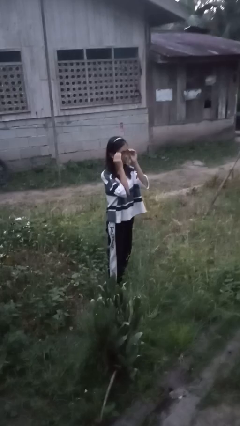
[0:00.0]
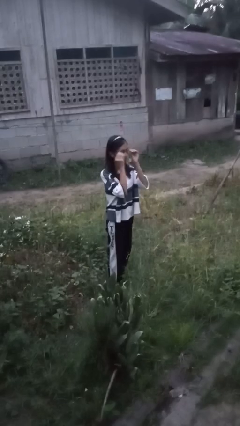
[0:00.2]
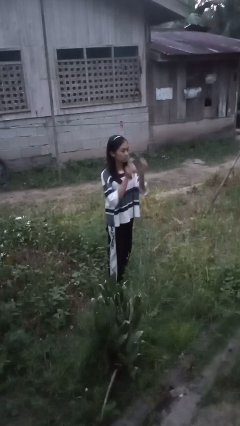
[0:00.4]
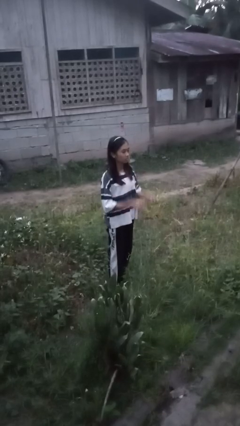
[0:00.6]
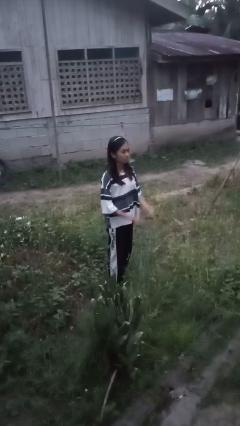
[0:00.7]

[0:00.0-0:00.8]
person takes off glasses

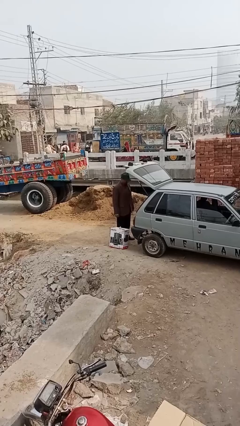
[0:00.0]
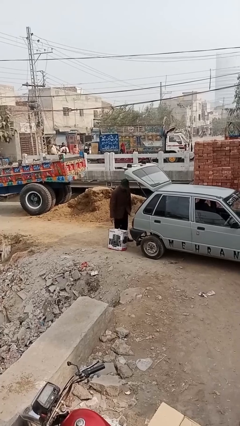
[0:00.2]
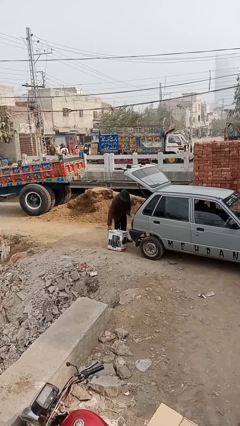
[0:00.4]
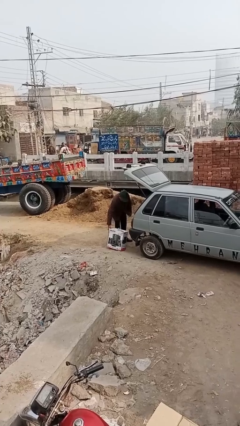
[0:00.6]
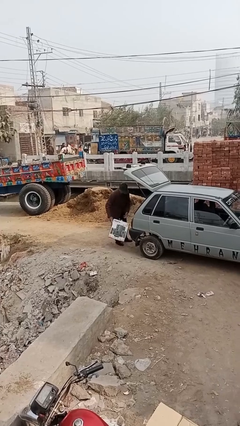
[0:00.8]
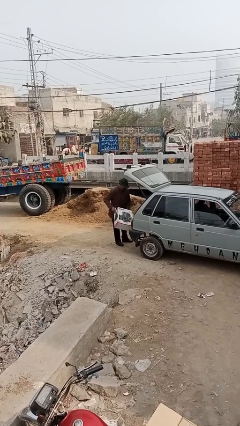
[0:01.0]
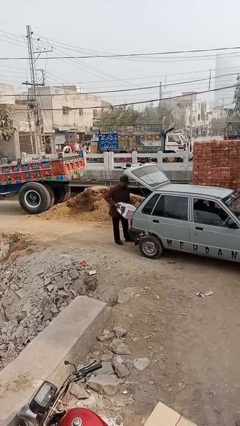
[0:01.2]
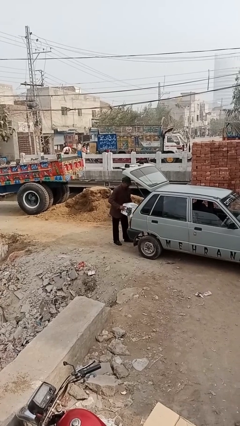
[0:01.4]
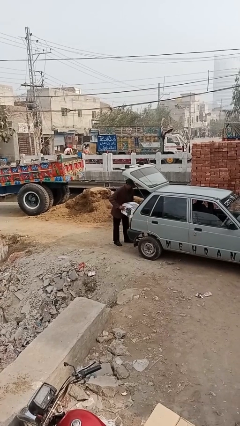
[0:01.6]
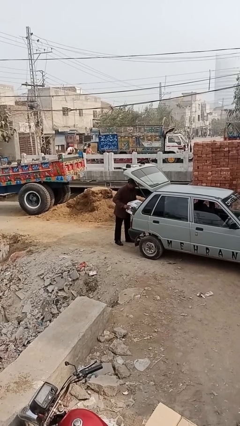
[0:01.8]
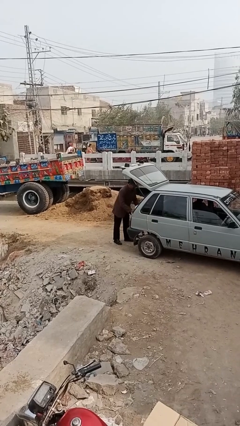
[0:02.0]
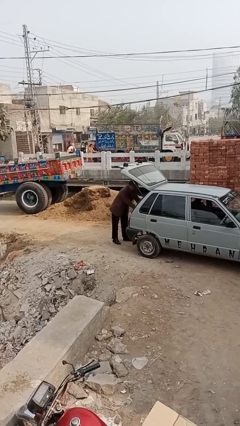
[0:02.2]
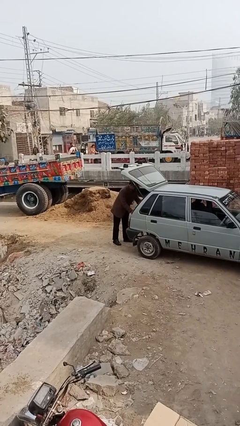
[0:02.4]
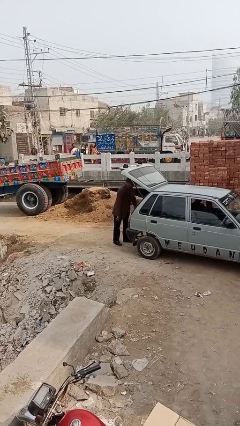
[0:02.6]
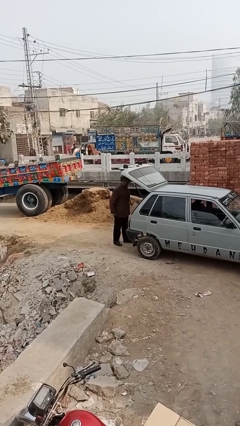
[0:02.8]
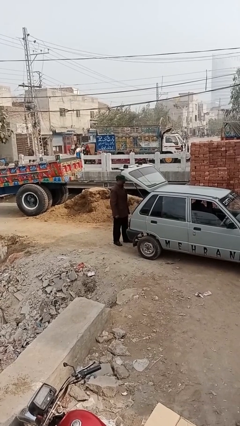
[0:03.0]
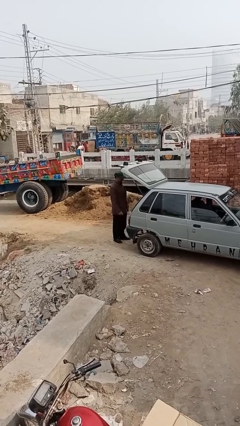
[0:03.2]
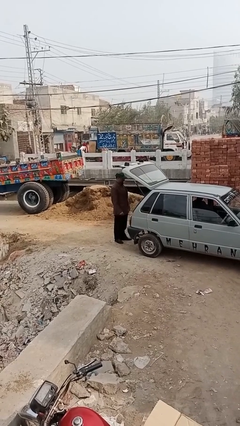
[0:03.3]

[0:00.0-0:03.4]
person loads car

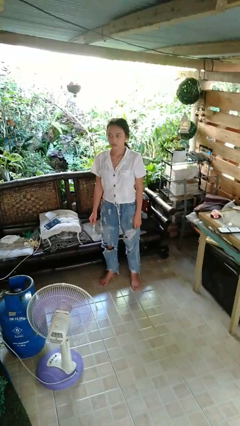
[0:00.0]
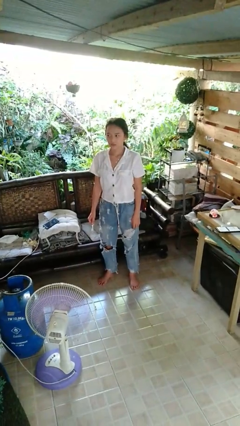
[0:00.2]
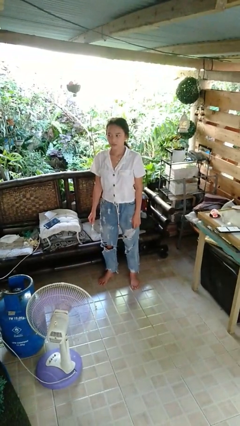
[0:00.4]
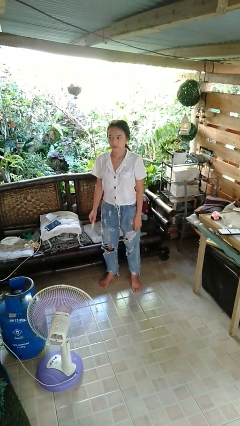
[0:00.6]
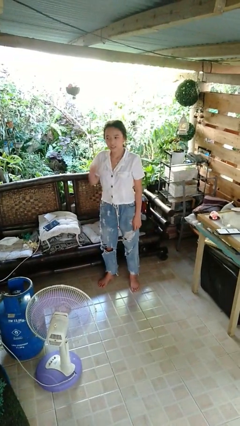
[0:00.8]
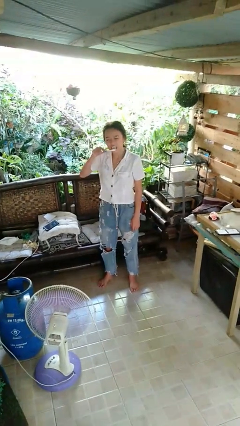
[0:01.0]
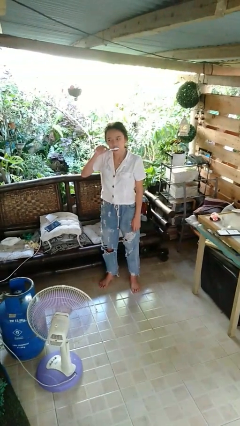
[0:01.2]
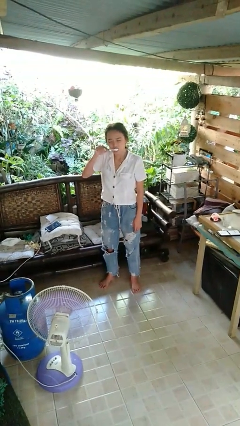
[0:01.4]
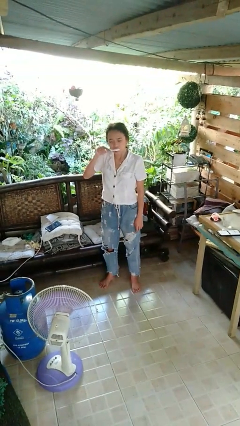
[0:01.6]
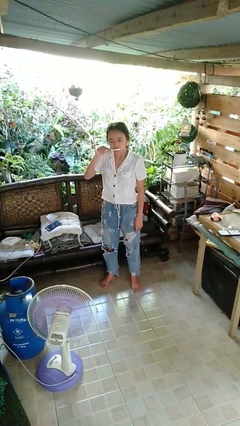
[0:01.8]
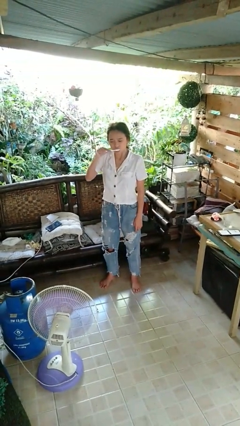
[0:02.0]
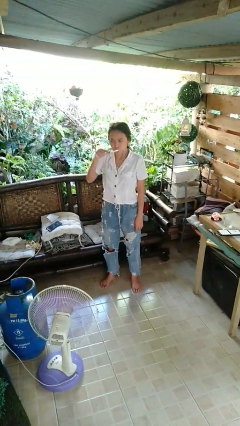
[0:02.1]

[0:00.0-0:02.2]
person brushes teeth

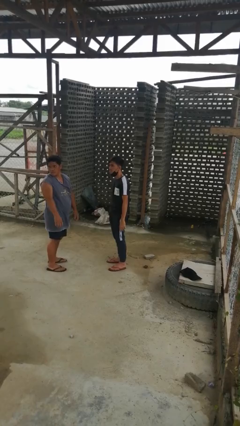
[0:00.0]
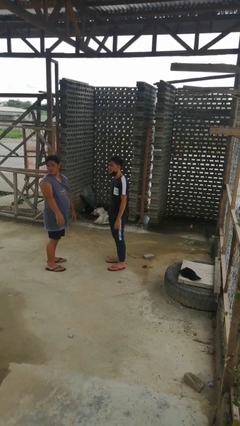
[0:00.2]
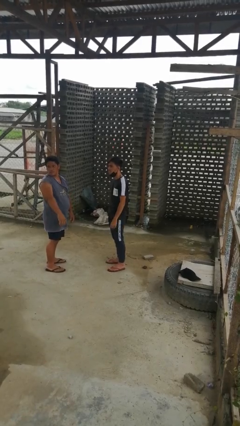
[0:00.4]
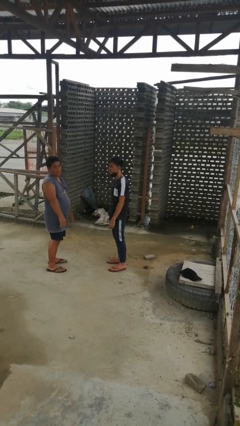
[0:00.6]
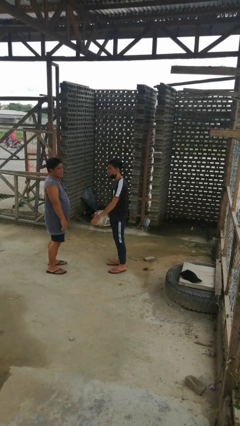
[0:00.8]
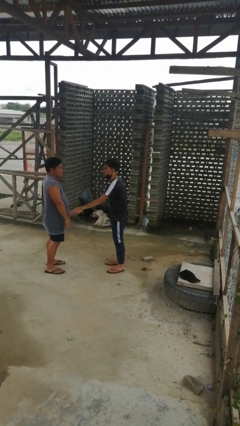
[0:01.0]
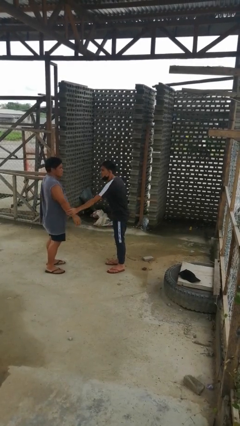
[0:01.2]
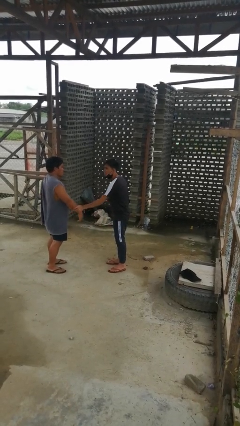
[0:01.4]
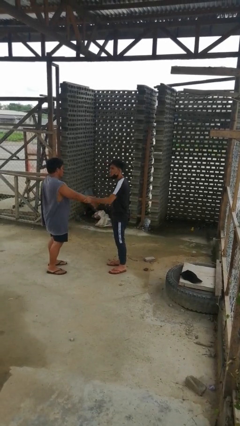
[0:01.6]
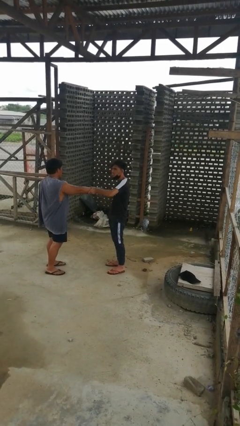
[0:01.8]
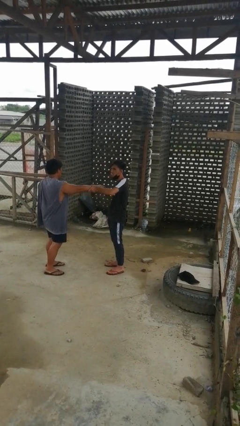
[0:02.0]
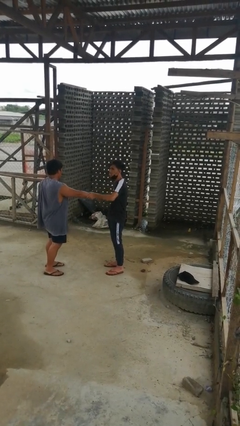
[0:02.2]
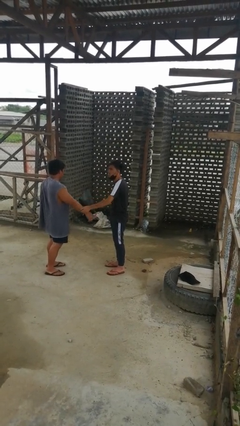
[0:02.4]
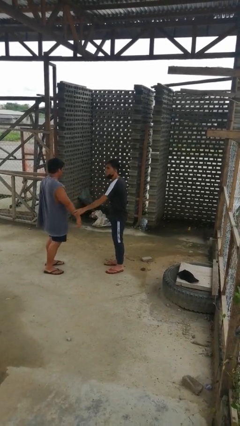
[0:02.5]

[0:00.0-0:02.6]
person grabs person by forearm

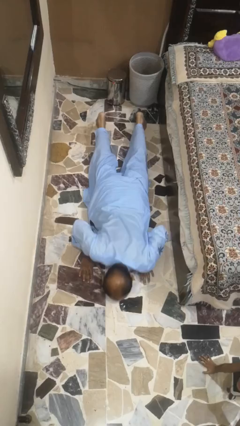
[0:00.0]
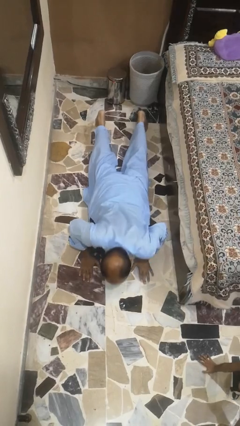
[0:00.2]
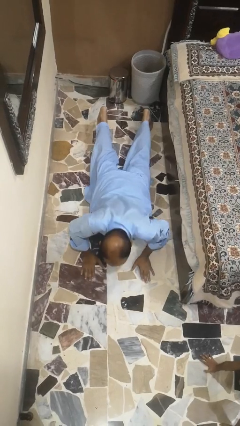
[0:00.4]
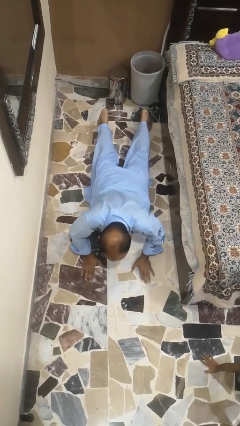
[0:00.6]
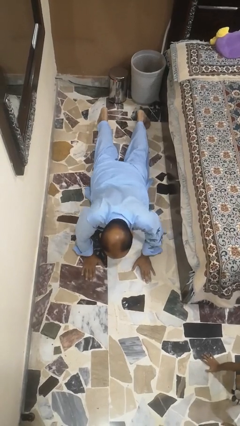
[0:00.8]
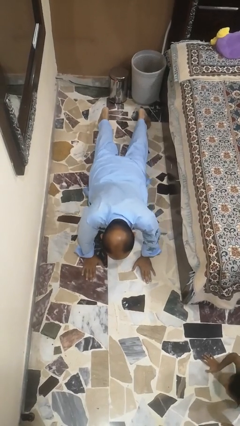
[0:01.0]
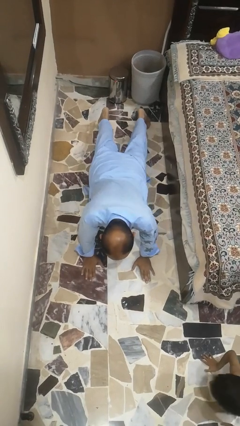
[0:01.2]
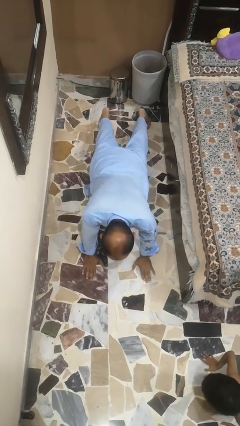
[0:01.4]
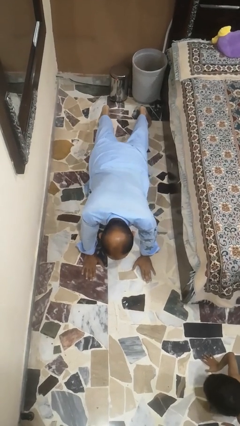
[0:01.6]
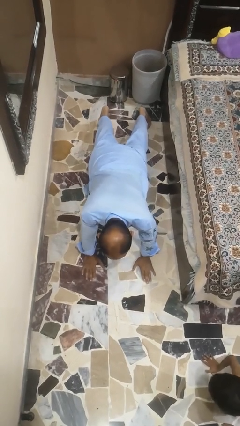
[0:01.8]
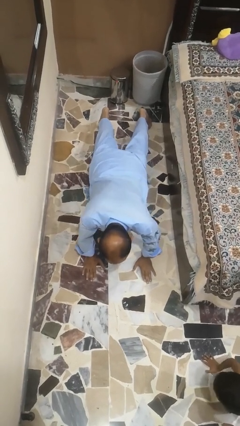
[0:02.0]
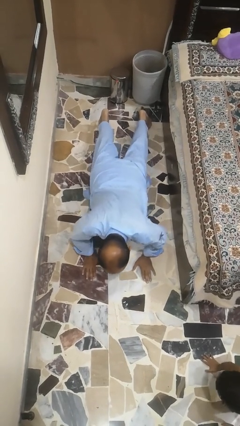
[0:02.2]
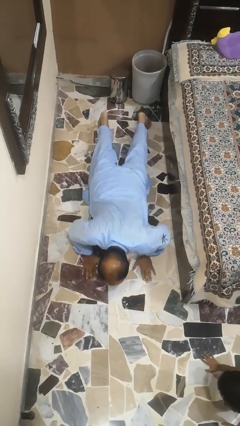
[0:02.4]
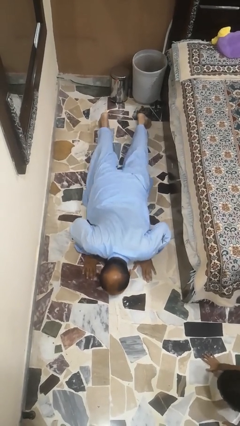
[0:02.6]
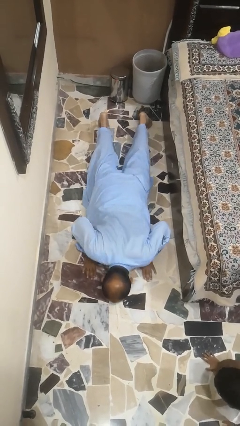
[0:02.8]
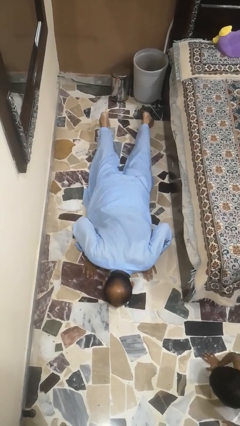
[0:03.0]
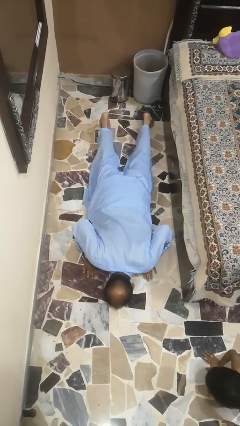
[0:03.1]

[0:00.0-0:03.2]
person exercises with pushup

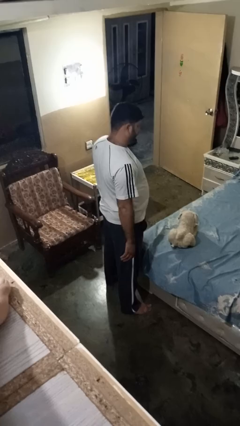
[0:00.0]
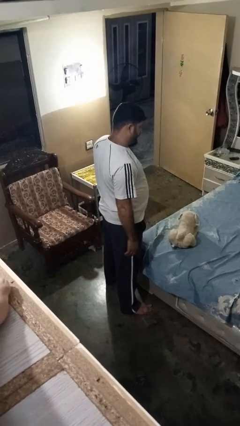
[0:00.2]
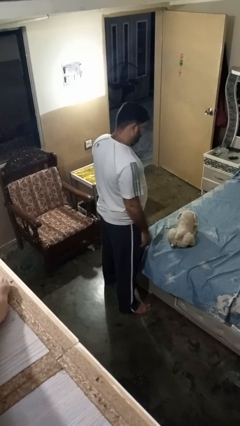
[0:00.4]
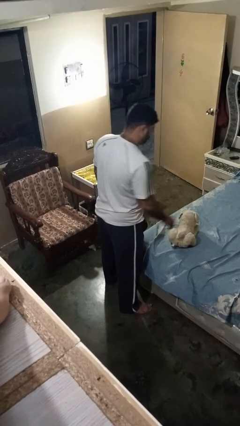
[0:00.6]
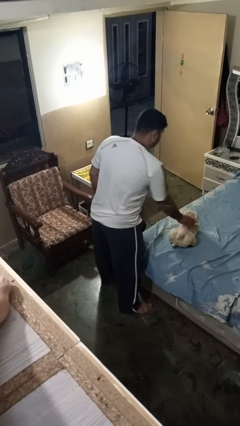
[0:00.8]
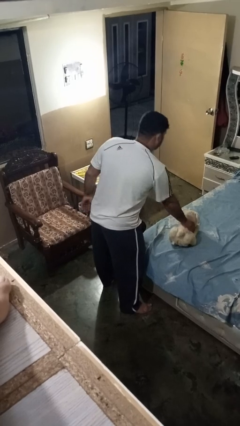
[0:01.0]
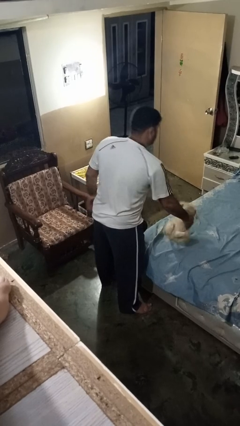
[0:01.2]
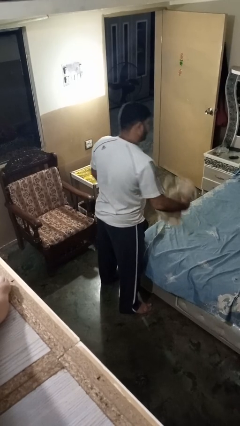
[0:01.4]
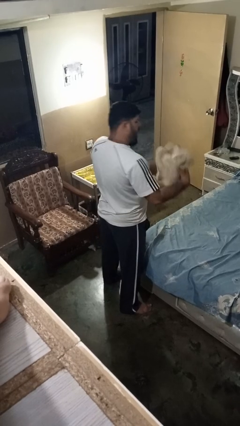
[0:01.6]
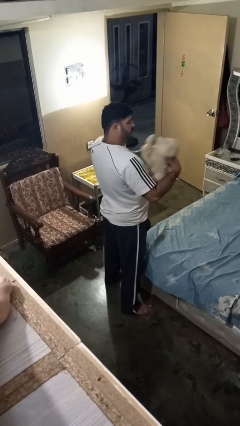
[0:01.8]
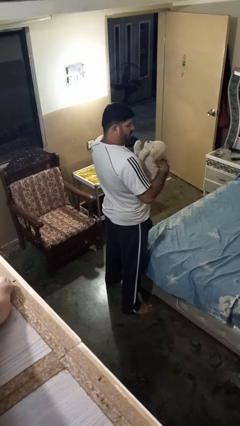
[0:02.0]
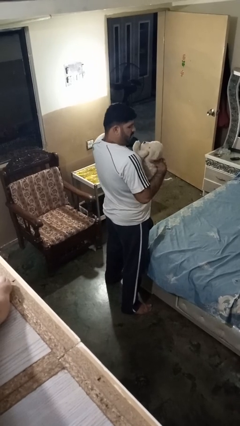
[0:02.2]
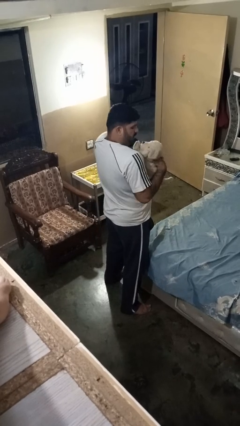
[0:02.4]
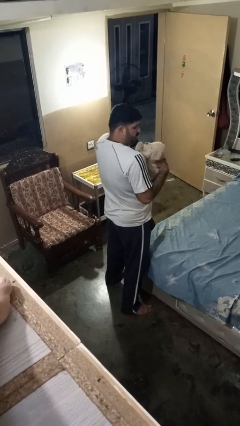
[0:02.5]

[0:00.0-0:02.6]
person hugs stuffed animal

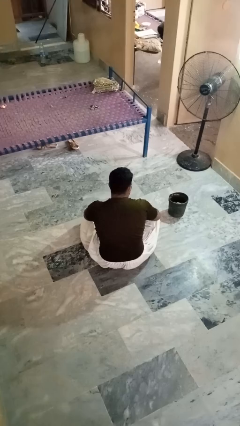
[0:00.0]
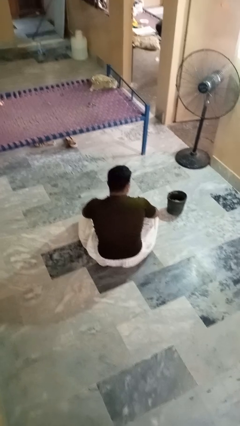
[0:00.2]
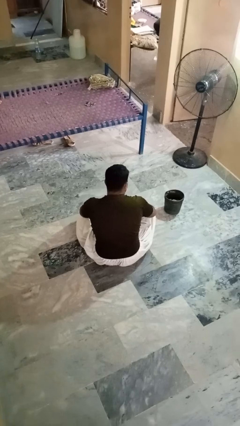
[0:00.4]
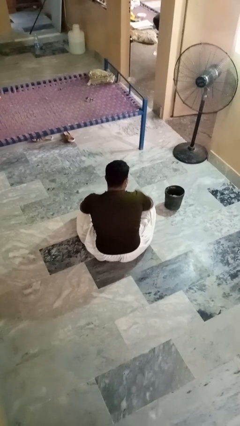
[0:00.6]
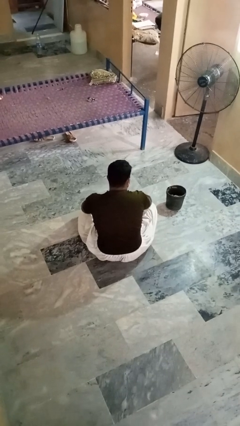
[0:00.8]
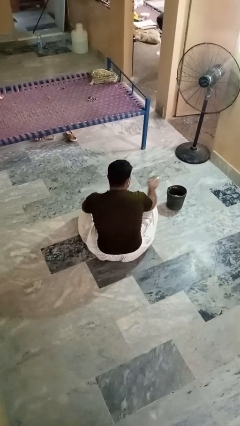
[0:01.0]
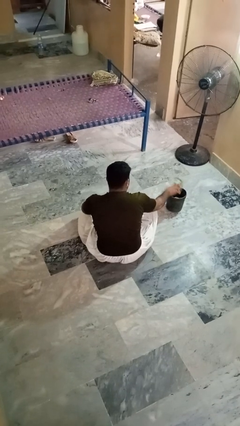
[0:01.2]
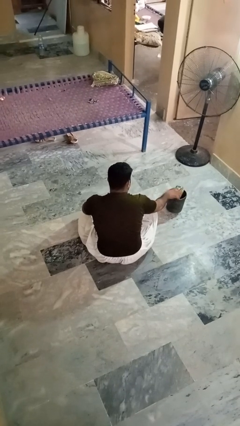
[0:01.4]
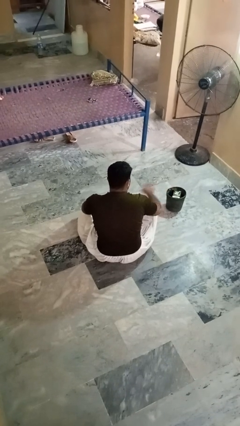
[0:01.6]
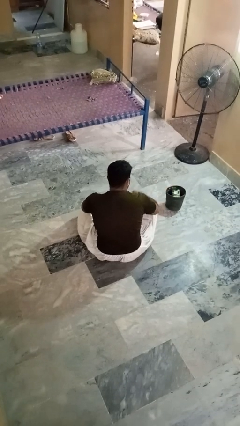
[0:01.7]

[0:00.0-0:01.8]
person puts object into basket

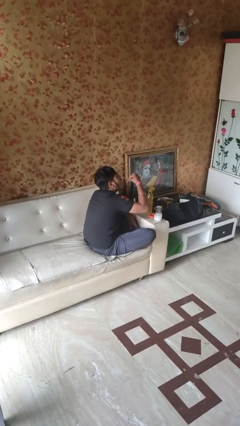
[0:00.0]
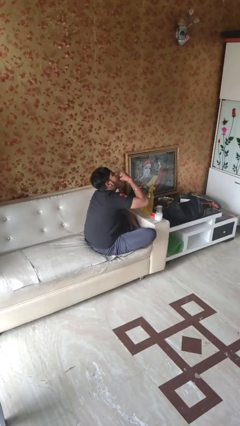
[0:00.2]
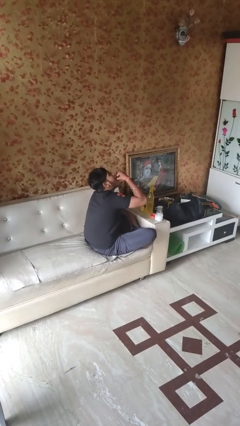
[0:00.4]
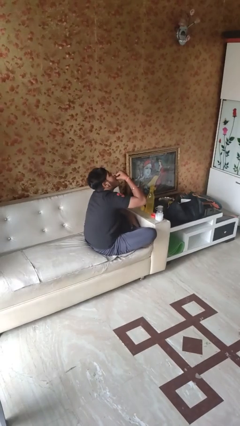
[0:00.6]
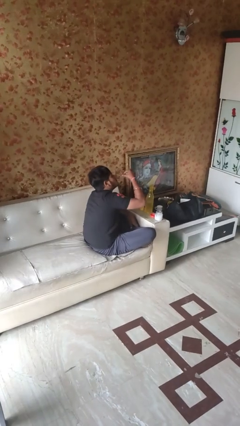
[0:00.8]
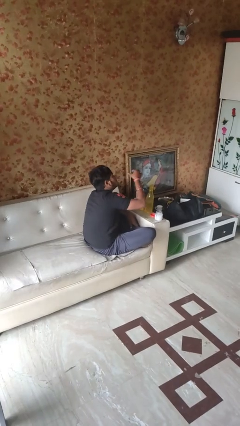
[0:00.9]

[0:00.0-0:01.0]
person takes medicine pills
